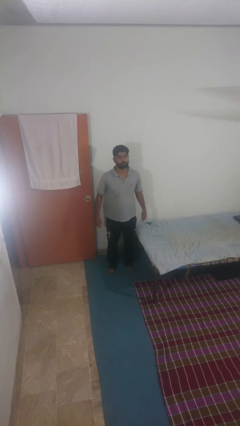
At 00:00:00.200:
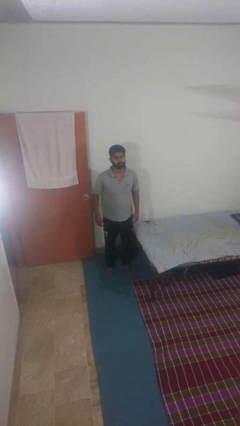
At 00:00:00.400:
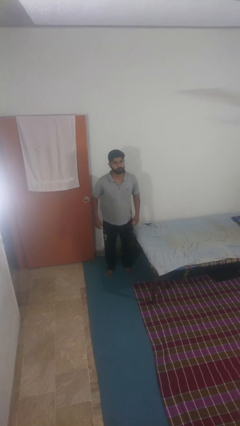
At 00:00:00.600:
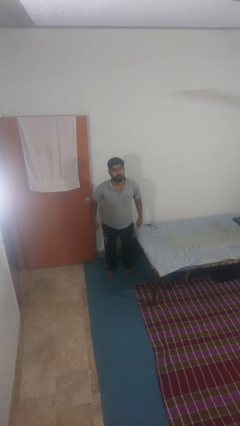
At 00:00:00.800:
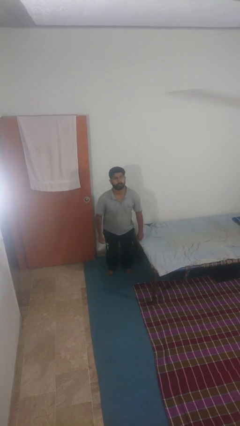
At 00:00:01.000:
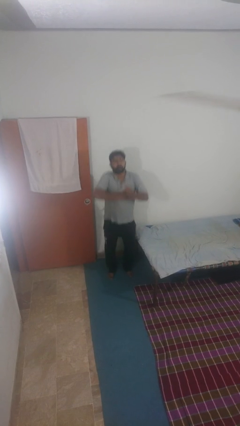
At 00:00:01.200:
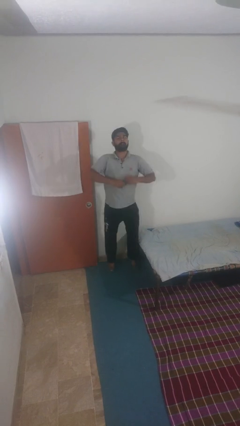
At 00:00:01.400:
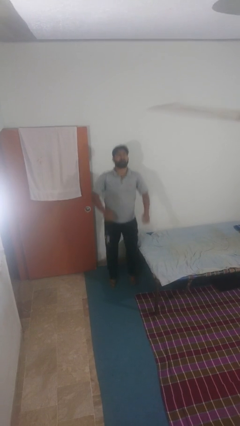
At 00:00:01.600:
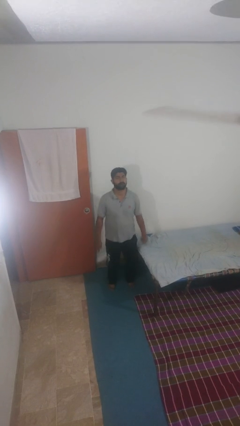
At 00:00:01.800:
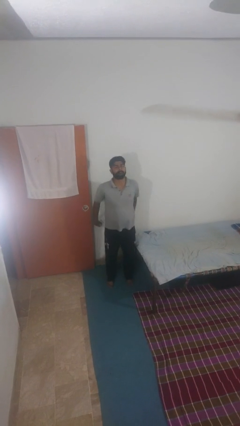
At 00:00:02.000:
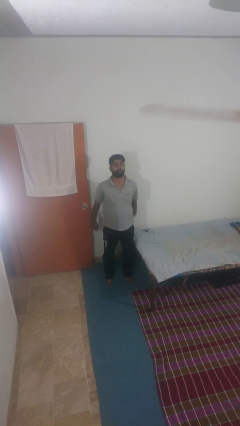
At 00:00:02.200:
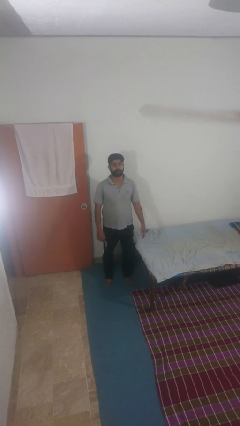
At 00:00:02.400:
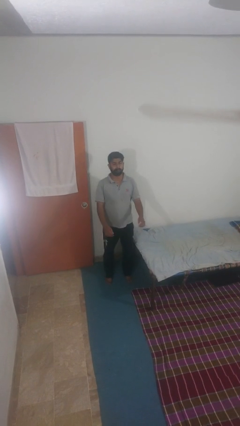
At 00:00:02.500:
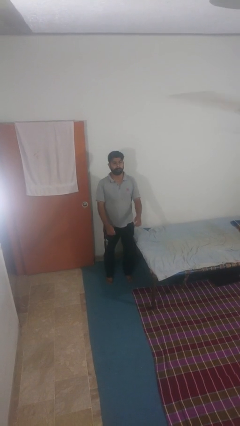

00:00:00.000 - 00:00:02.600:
person jumps

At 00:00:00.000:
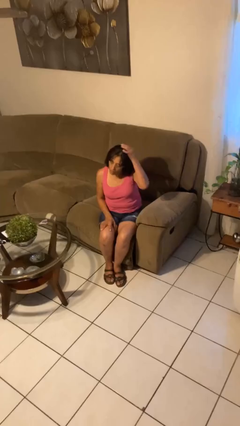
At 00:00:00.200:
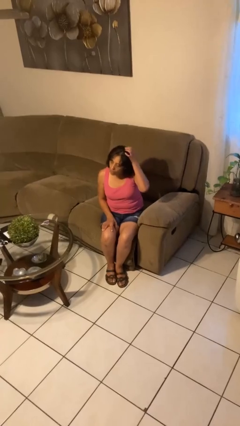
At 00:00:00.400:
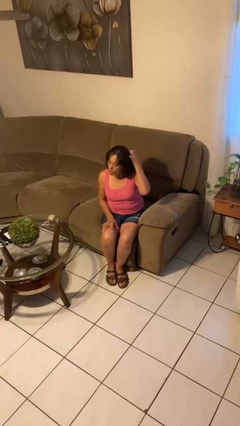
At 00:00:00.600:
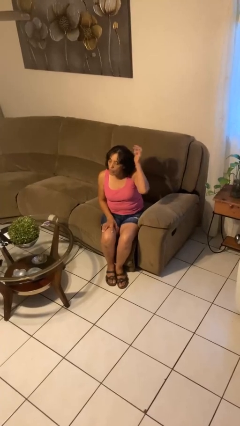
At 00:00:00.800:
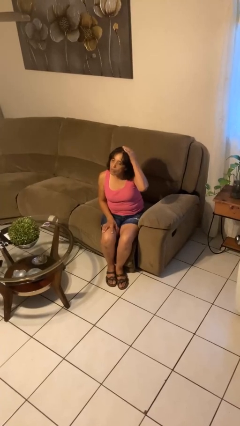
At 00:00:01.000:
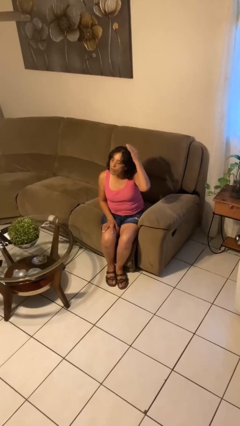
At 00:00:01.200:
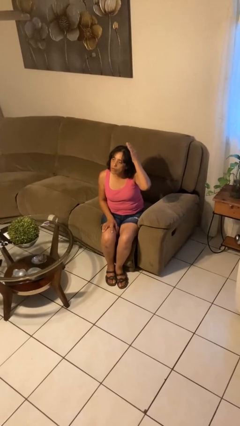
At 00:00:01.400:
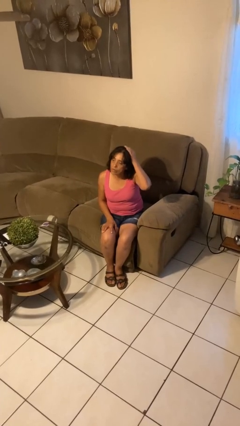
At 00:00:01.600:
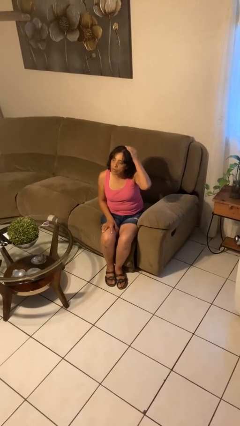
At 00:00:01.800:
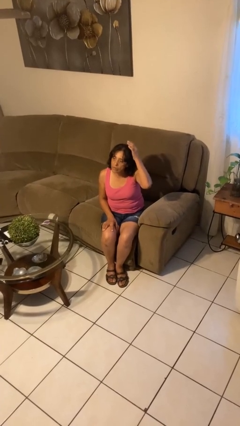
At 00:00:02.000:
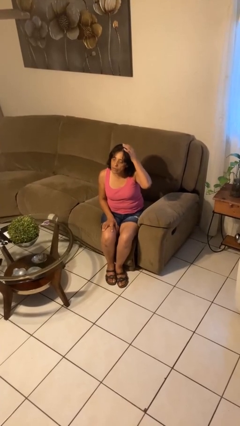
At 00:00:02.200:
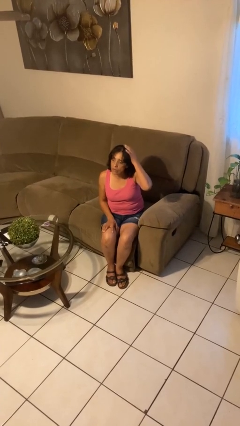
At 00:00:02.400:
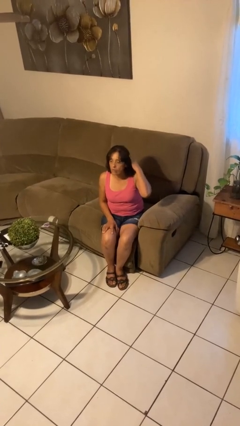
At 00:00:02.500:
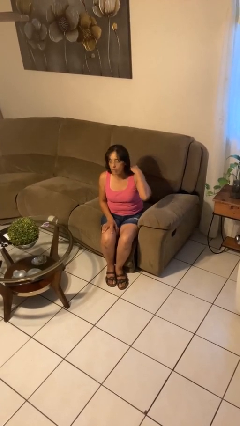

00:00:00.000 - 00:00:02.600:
person pats head

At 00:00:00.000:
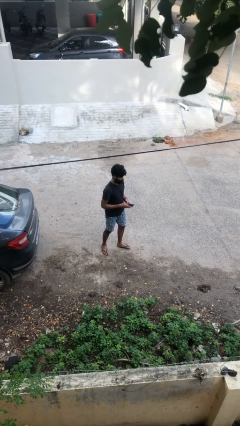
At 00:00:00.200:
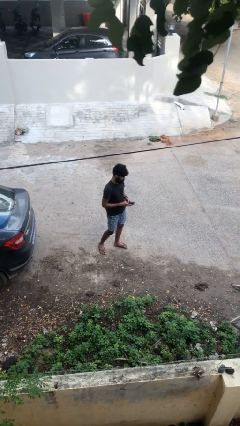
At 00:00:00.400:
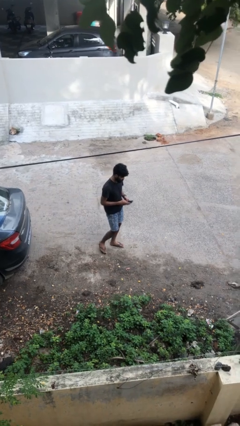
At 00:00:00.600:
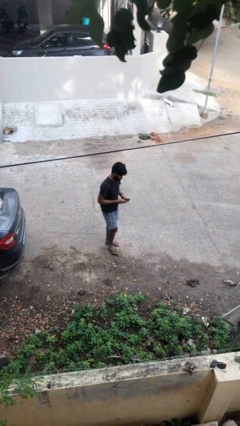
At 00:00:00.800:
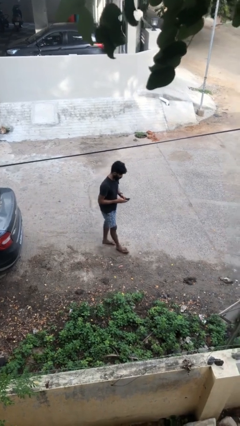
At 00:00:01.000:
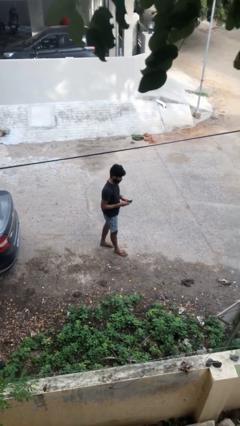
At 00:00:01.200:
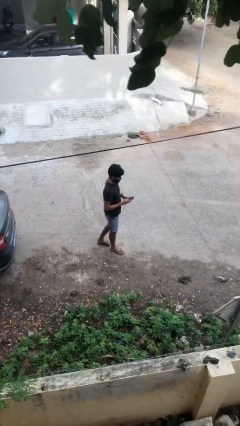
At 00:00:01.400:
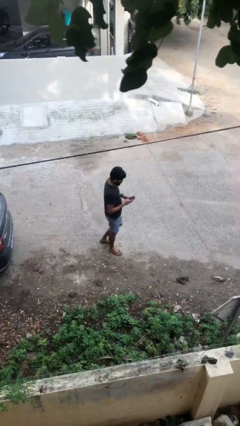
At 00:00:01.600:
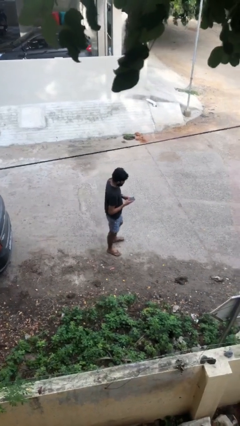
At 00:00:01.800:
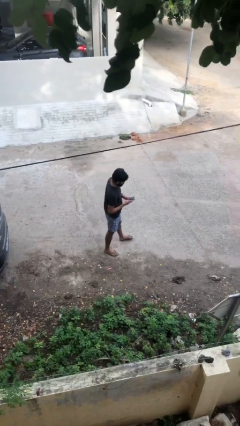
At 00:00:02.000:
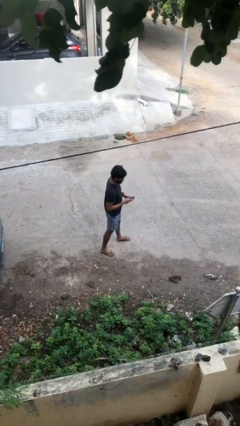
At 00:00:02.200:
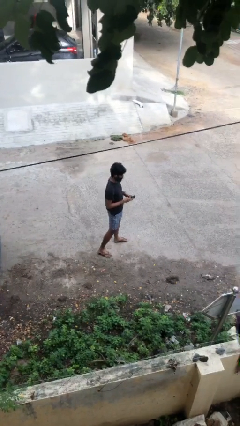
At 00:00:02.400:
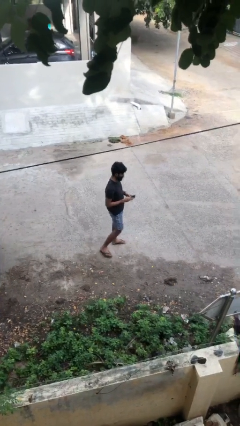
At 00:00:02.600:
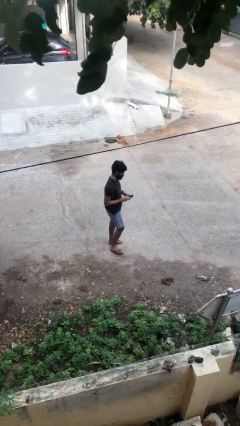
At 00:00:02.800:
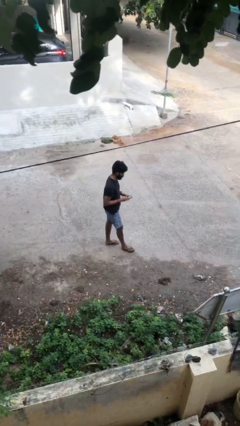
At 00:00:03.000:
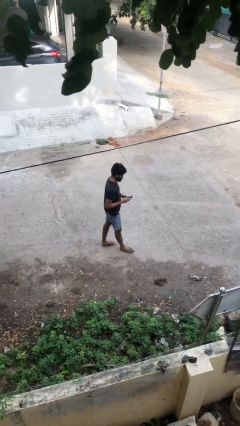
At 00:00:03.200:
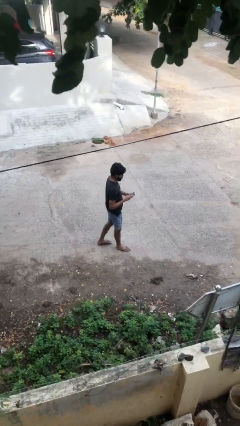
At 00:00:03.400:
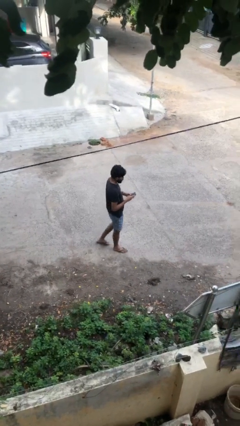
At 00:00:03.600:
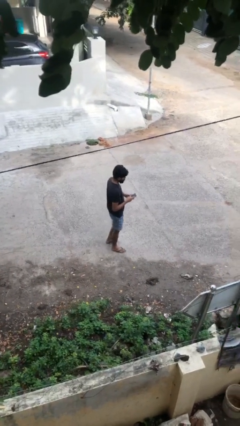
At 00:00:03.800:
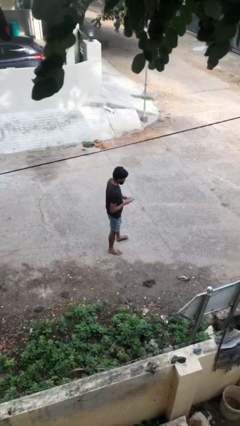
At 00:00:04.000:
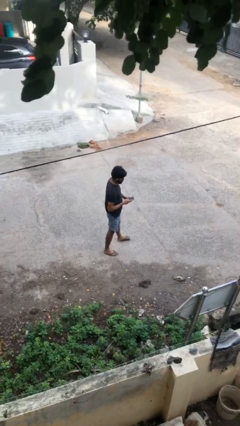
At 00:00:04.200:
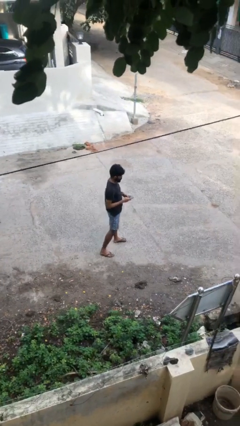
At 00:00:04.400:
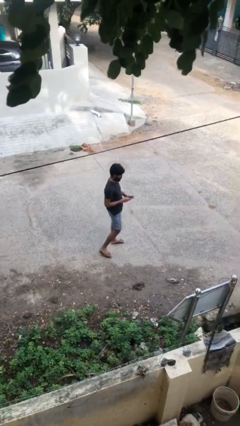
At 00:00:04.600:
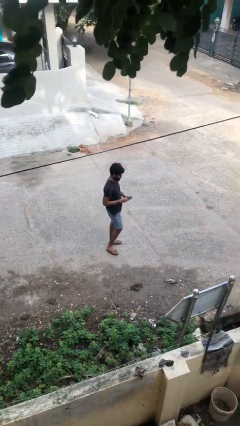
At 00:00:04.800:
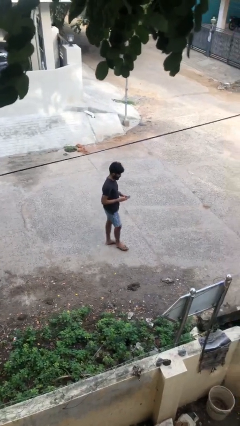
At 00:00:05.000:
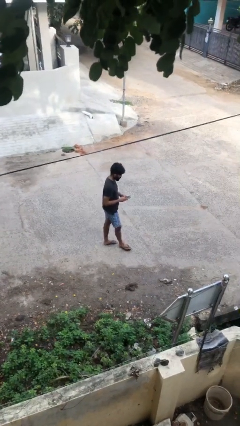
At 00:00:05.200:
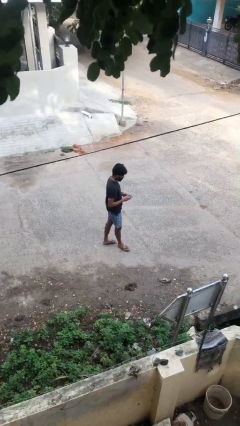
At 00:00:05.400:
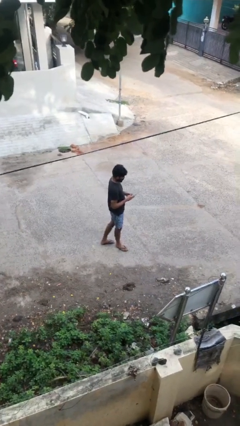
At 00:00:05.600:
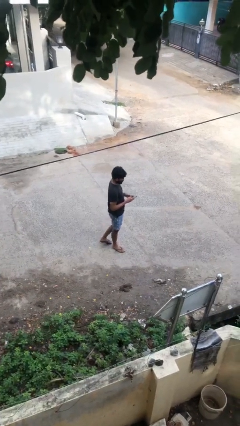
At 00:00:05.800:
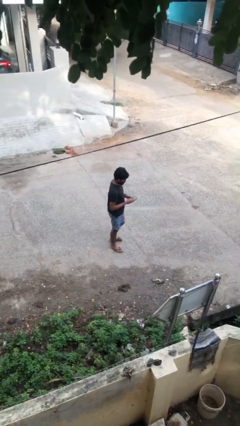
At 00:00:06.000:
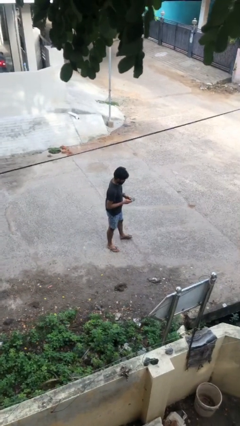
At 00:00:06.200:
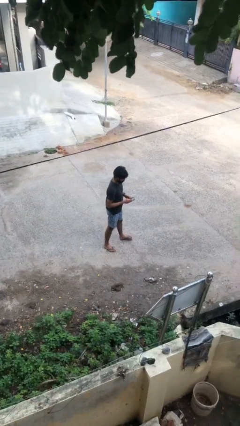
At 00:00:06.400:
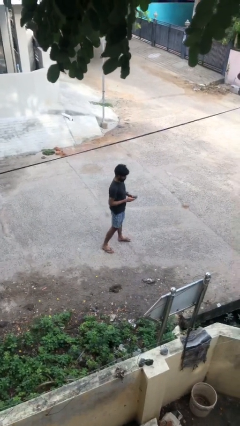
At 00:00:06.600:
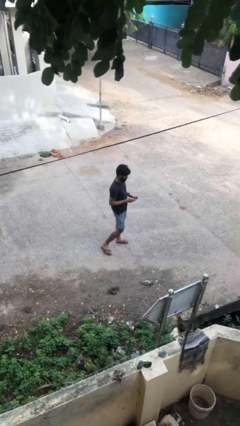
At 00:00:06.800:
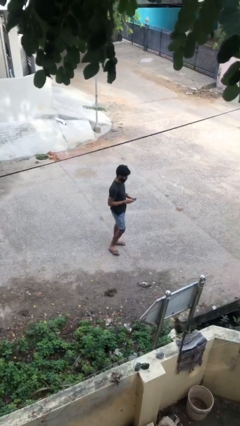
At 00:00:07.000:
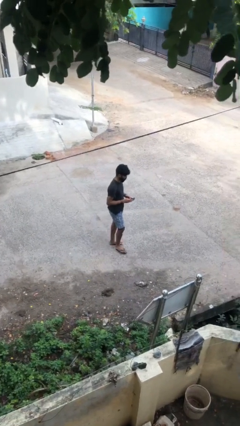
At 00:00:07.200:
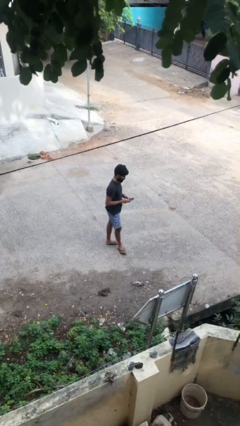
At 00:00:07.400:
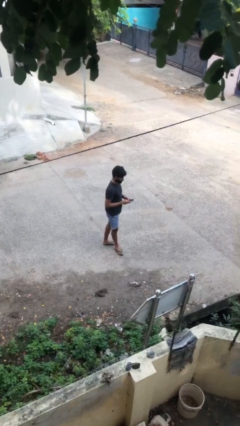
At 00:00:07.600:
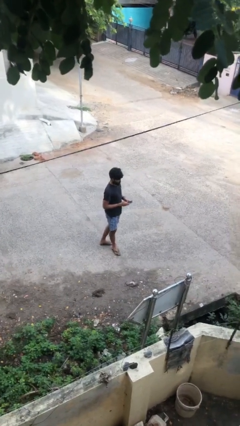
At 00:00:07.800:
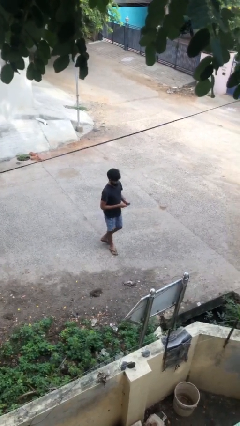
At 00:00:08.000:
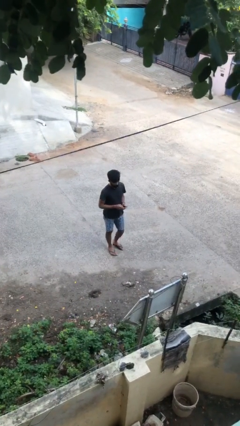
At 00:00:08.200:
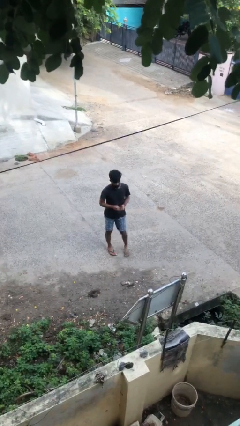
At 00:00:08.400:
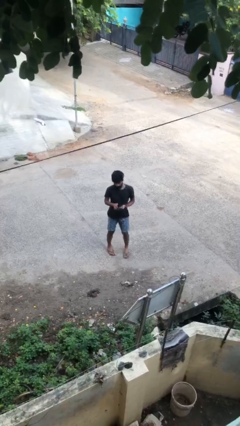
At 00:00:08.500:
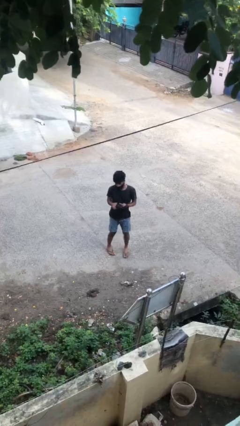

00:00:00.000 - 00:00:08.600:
person texts on phone

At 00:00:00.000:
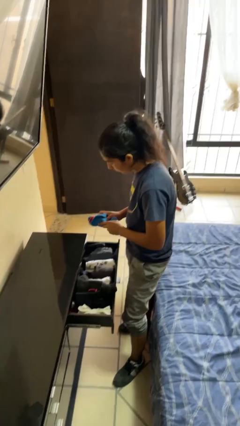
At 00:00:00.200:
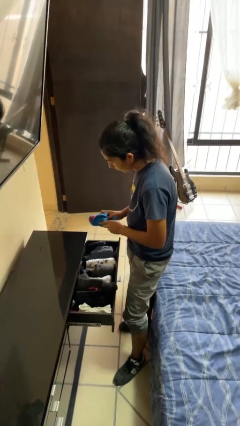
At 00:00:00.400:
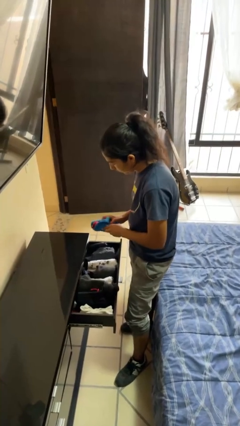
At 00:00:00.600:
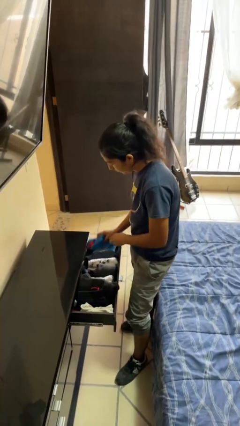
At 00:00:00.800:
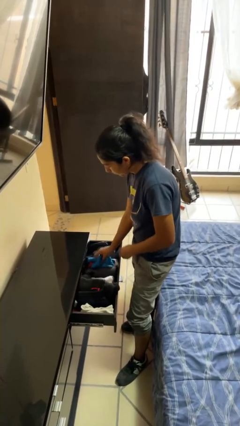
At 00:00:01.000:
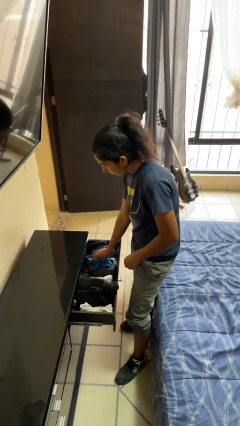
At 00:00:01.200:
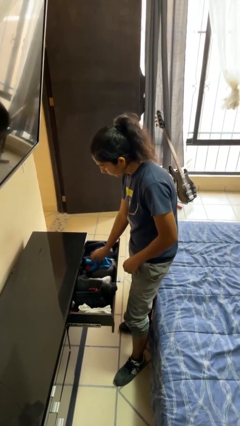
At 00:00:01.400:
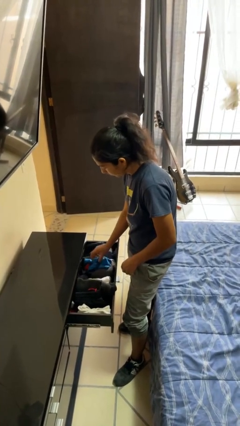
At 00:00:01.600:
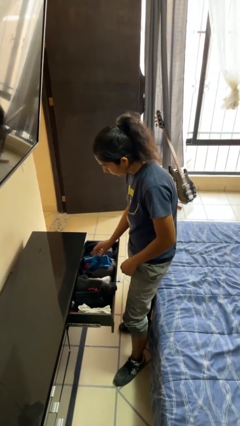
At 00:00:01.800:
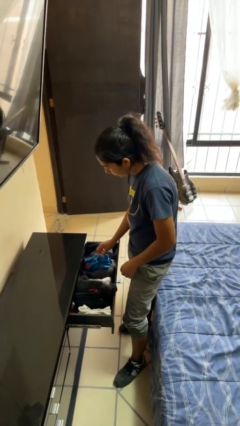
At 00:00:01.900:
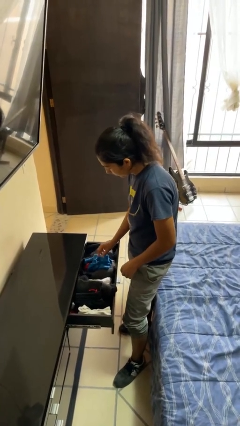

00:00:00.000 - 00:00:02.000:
person puts clothes into dresser

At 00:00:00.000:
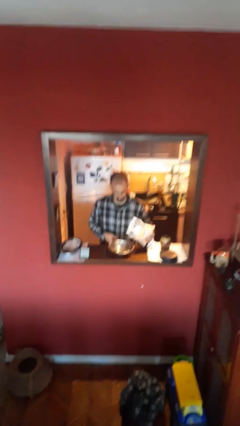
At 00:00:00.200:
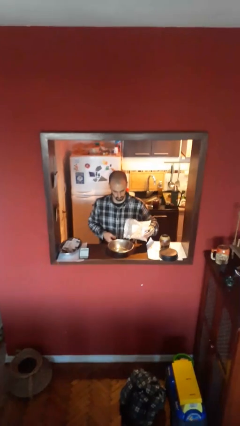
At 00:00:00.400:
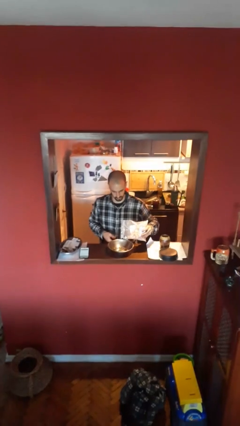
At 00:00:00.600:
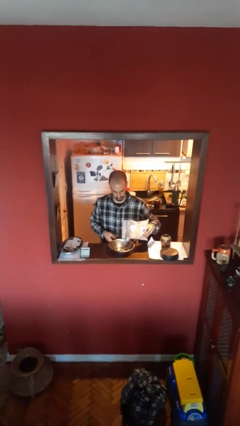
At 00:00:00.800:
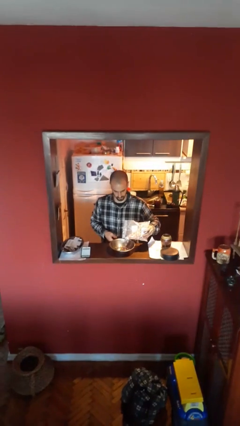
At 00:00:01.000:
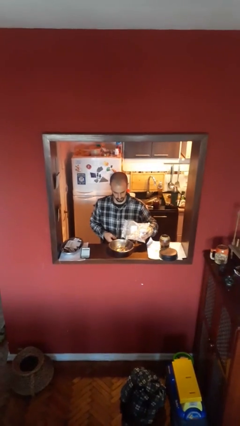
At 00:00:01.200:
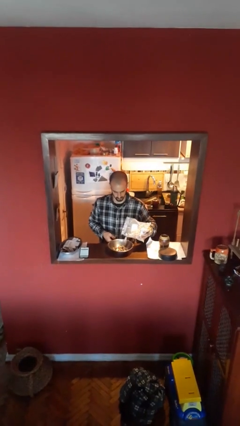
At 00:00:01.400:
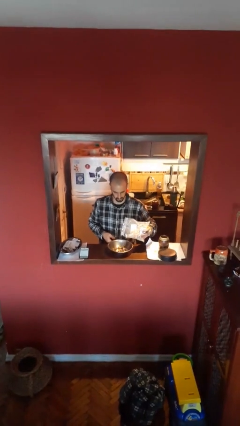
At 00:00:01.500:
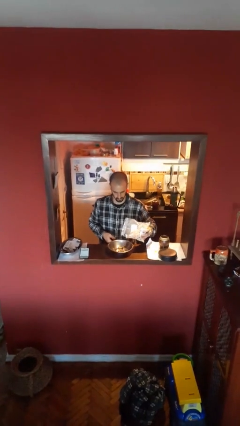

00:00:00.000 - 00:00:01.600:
person pours into bowl
